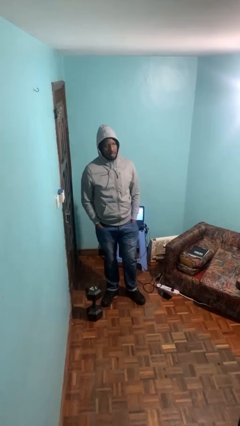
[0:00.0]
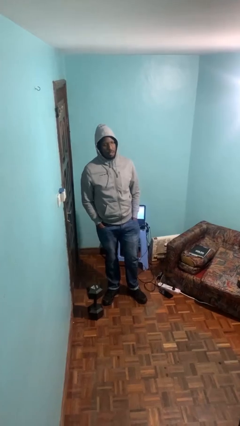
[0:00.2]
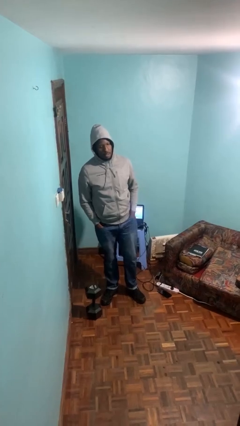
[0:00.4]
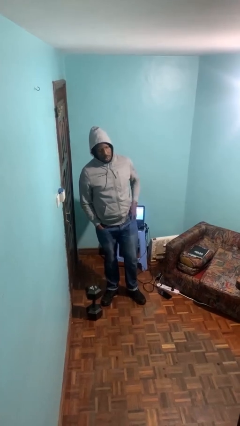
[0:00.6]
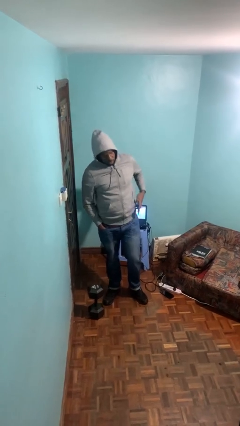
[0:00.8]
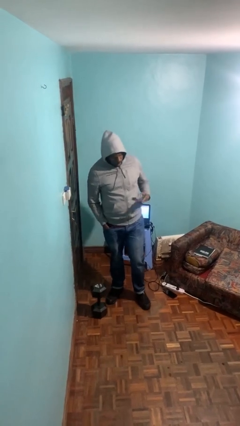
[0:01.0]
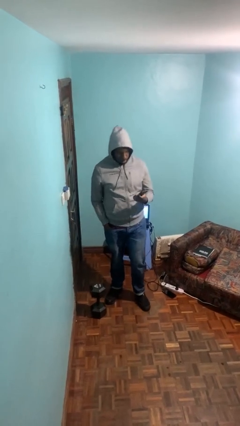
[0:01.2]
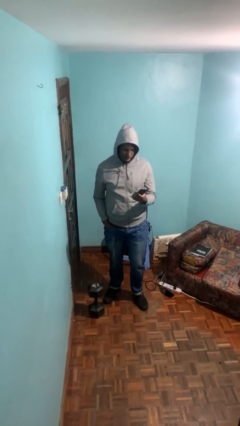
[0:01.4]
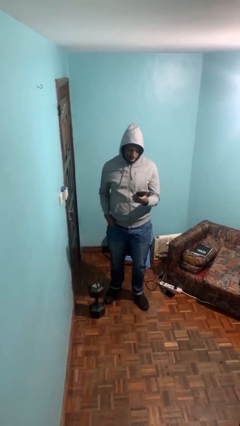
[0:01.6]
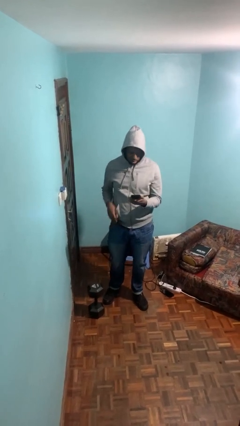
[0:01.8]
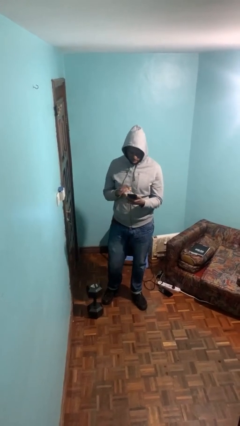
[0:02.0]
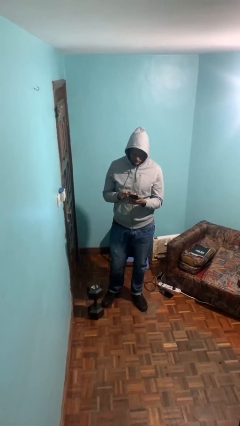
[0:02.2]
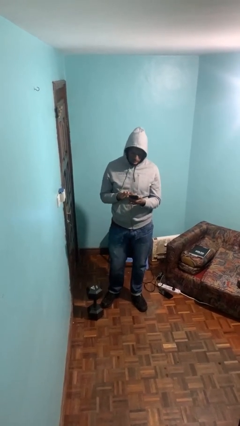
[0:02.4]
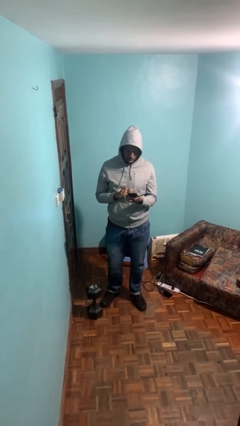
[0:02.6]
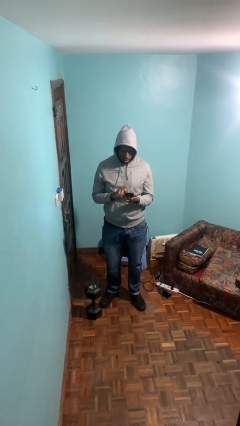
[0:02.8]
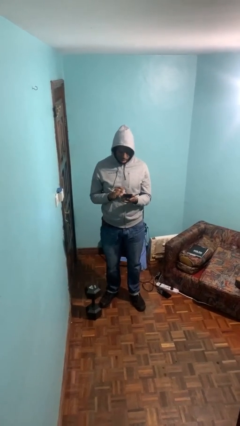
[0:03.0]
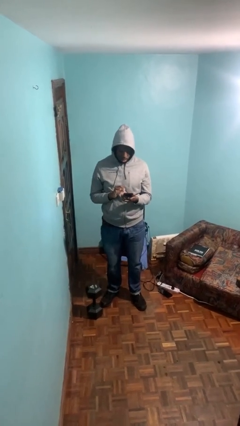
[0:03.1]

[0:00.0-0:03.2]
person takes phone from pocket

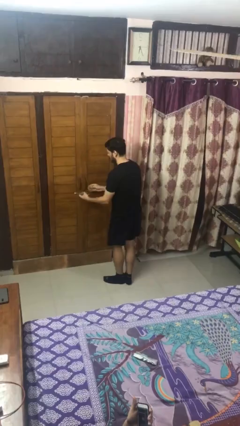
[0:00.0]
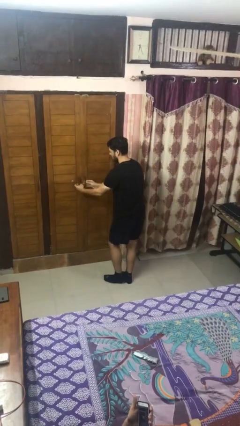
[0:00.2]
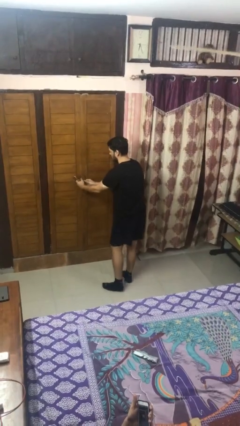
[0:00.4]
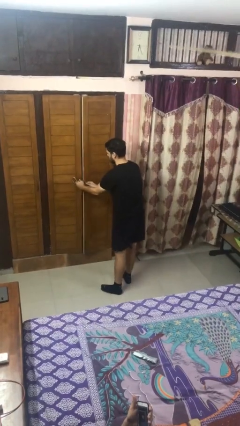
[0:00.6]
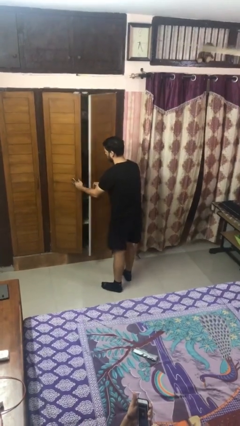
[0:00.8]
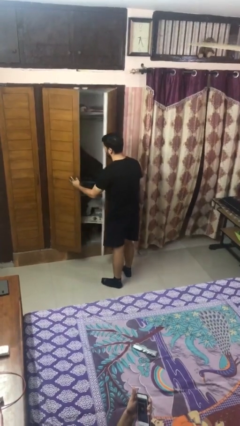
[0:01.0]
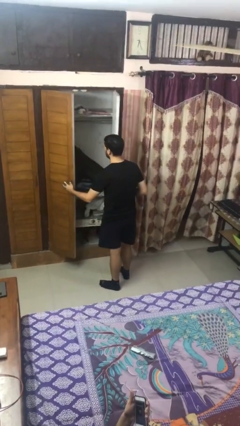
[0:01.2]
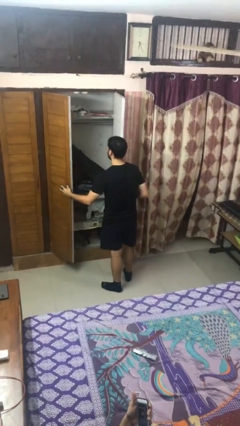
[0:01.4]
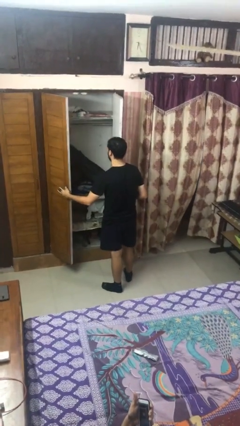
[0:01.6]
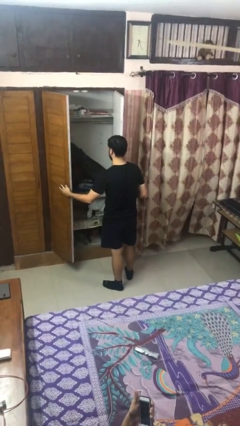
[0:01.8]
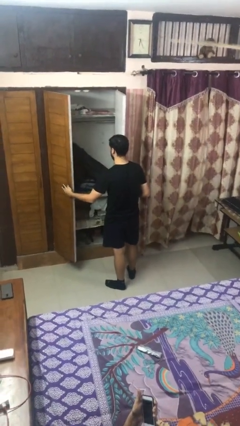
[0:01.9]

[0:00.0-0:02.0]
person opens facility door

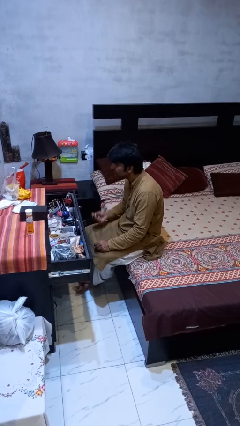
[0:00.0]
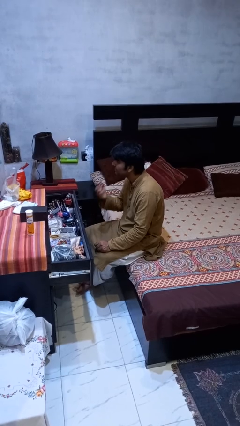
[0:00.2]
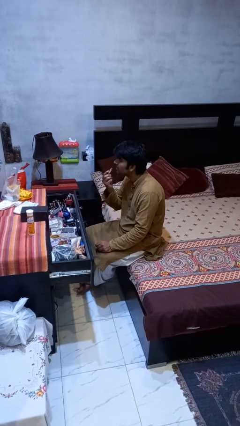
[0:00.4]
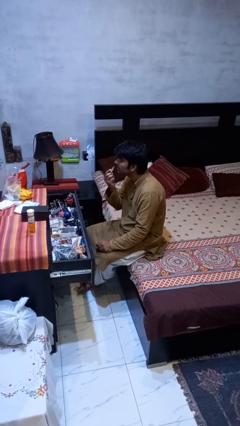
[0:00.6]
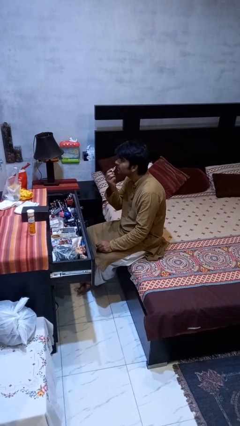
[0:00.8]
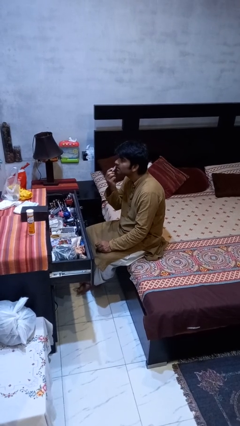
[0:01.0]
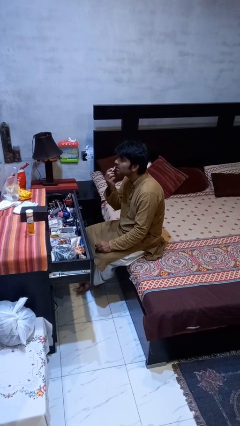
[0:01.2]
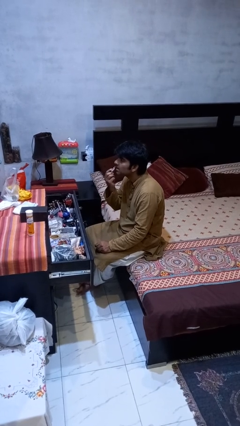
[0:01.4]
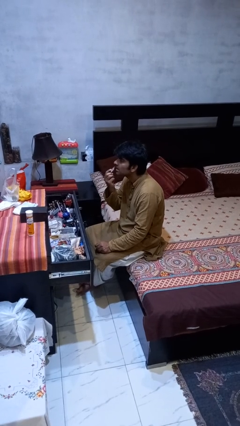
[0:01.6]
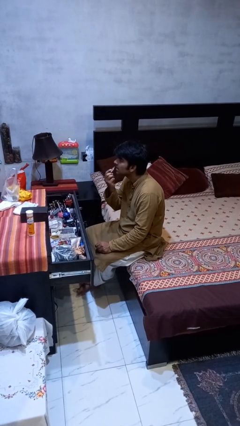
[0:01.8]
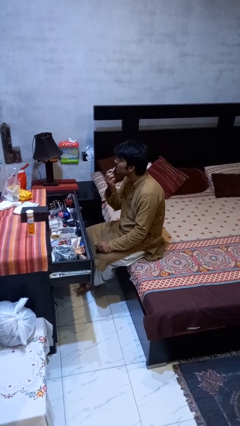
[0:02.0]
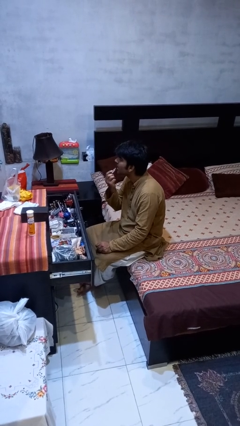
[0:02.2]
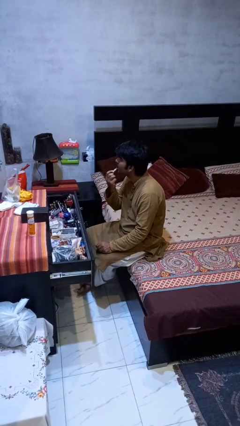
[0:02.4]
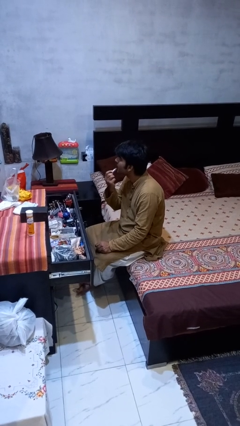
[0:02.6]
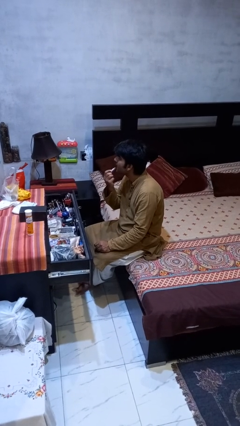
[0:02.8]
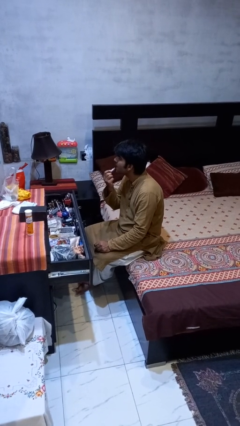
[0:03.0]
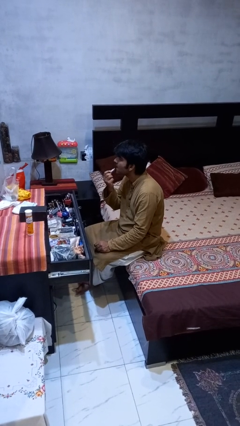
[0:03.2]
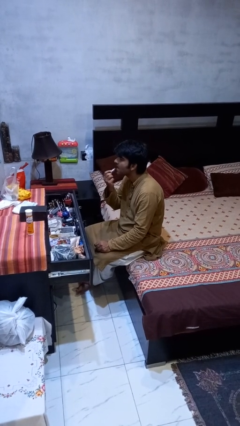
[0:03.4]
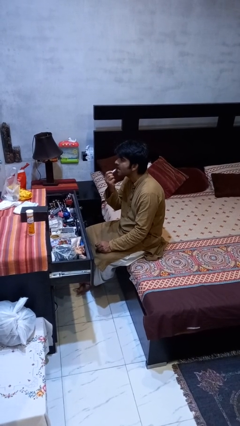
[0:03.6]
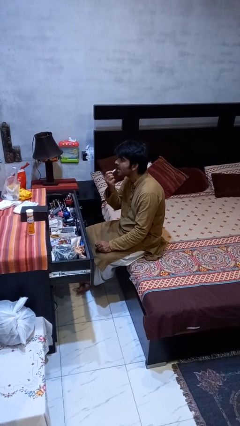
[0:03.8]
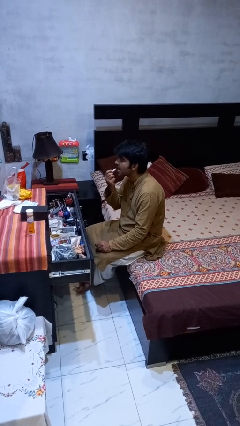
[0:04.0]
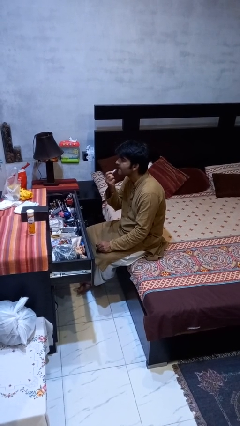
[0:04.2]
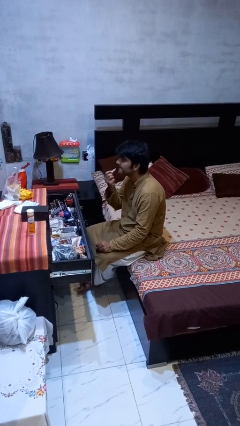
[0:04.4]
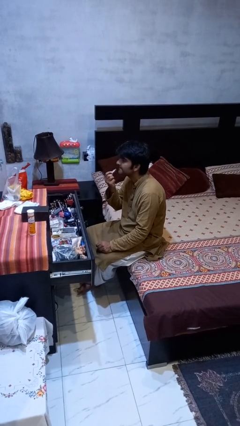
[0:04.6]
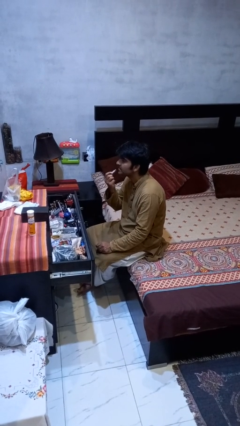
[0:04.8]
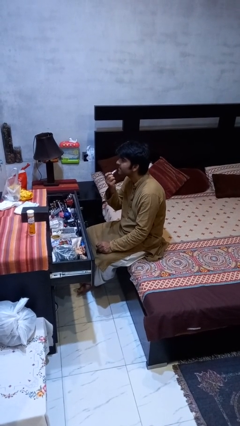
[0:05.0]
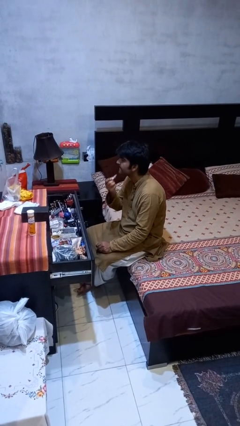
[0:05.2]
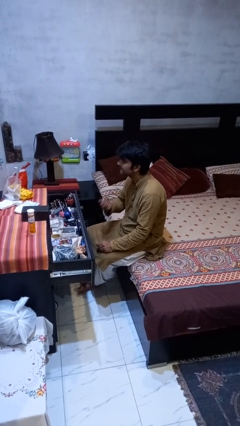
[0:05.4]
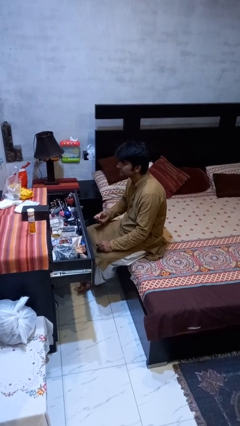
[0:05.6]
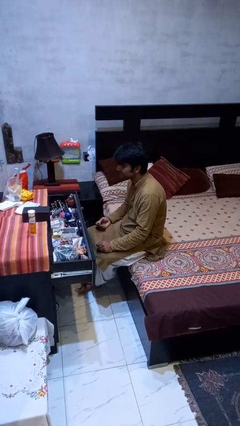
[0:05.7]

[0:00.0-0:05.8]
person applies lip makeup

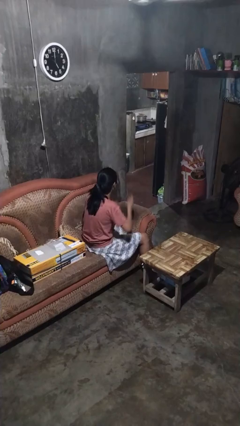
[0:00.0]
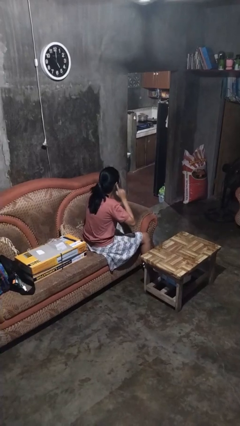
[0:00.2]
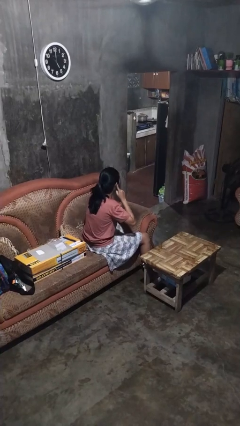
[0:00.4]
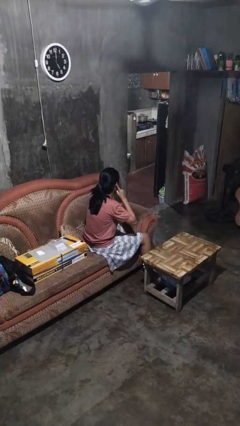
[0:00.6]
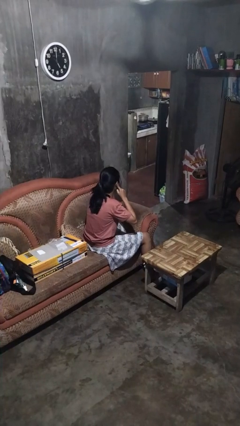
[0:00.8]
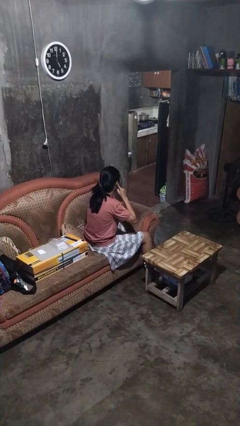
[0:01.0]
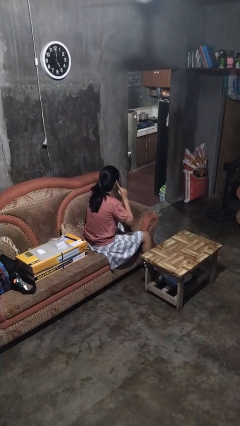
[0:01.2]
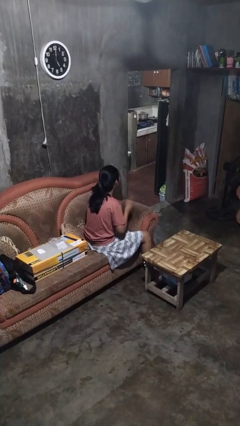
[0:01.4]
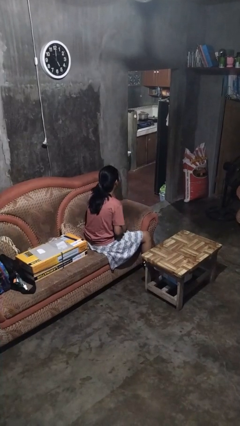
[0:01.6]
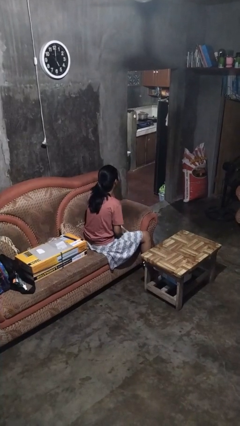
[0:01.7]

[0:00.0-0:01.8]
person puts fingers in ear

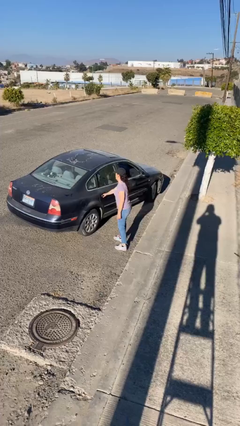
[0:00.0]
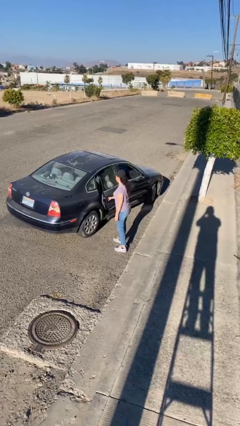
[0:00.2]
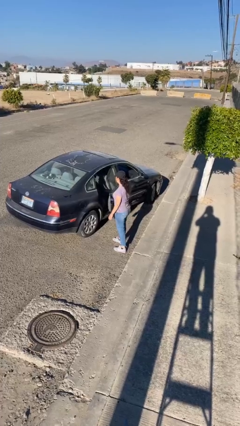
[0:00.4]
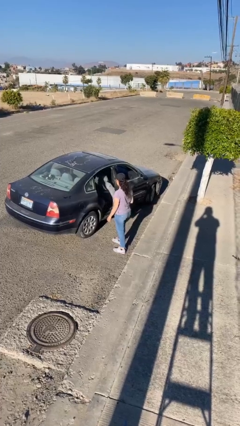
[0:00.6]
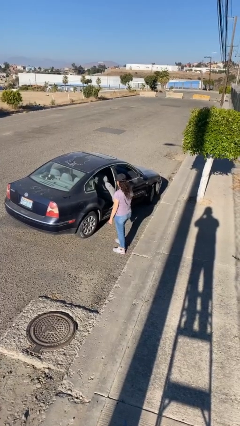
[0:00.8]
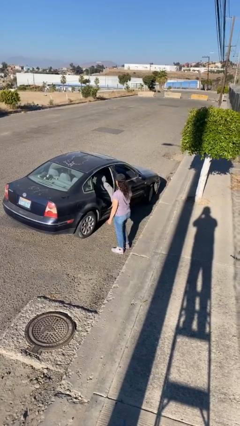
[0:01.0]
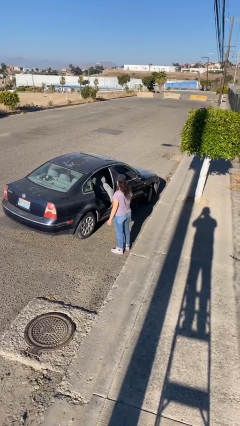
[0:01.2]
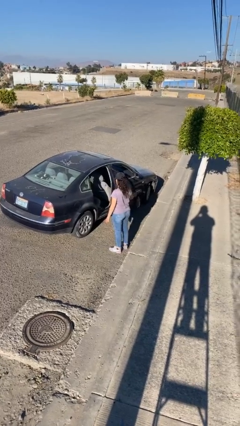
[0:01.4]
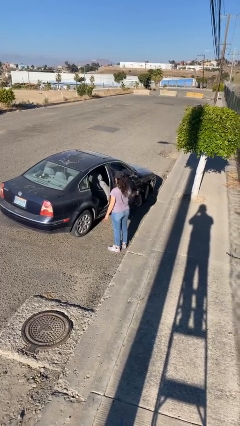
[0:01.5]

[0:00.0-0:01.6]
person opens car door

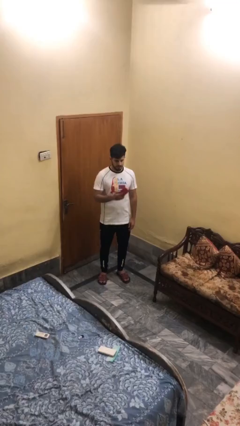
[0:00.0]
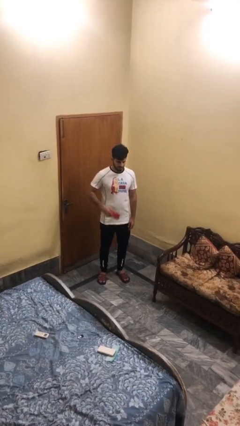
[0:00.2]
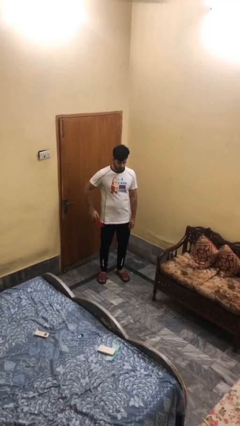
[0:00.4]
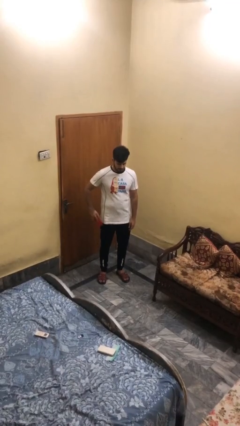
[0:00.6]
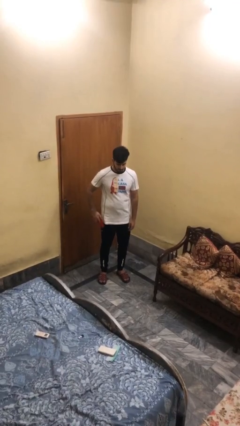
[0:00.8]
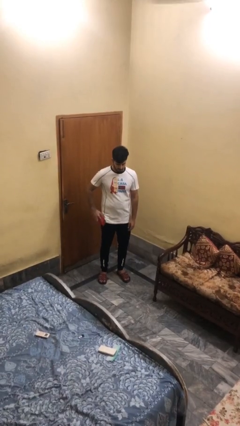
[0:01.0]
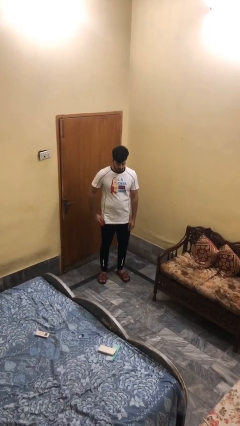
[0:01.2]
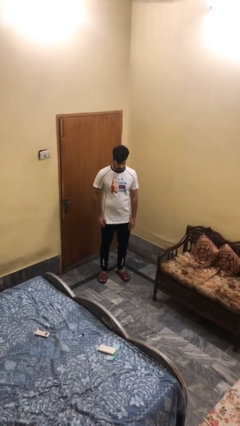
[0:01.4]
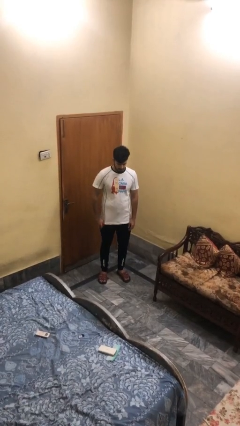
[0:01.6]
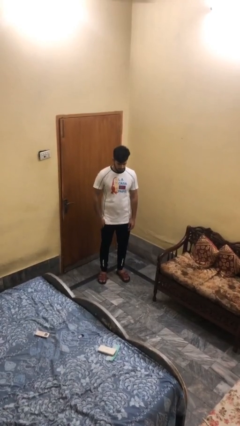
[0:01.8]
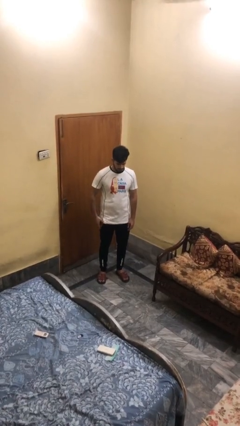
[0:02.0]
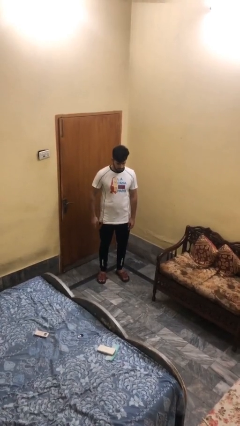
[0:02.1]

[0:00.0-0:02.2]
person puts phone into pocket

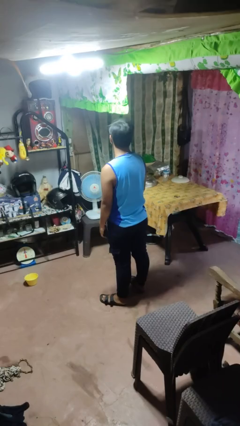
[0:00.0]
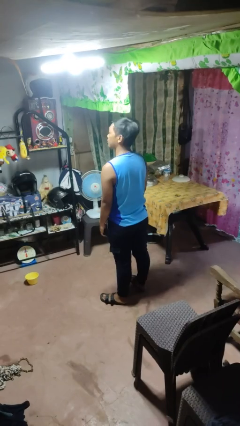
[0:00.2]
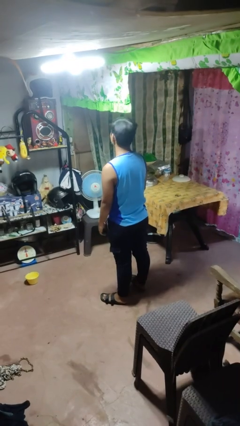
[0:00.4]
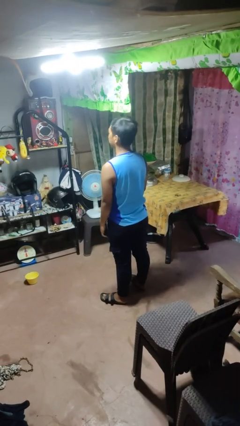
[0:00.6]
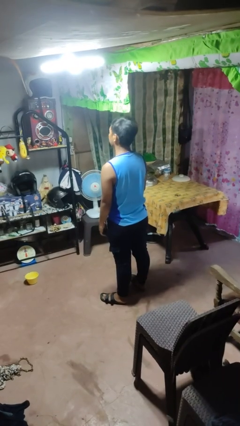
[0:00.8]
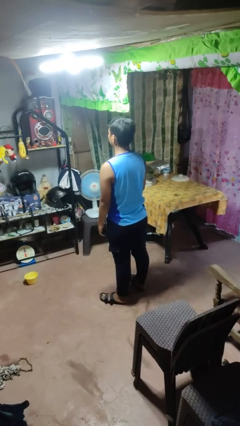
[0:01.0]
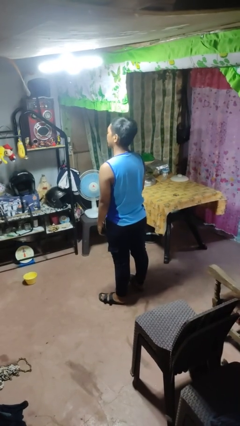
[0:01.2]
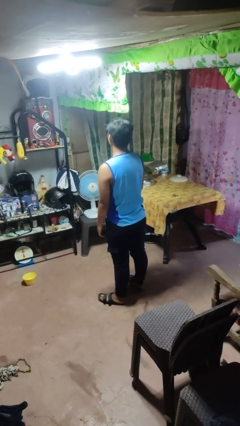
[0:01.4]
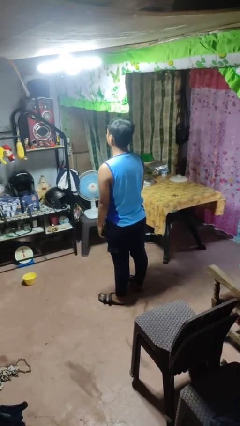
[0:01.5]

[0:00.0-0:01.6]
person shakes head
